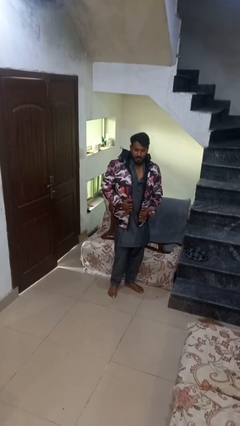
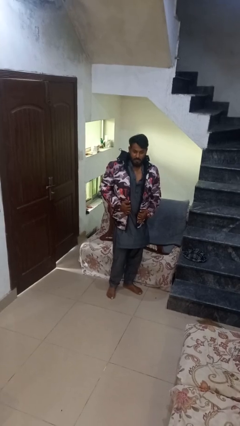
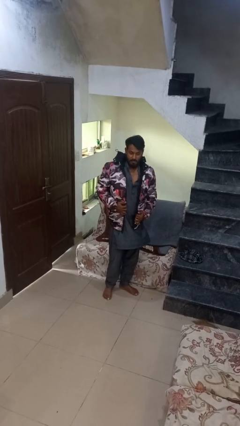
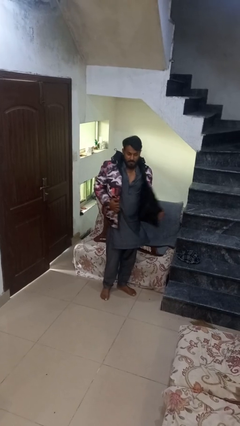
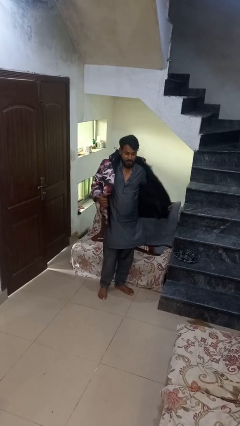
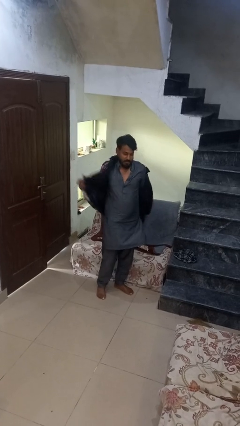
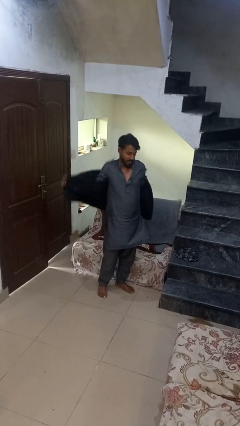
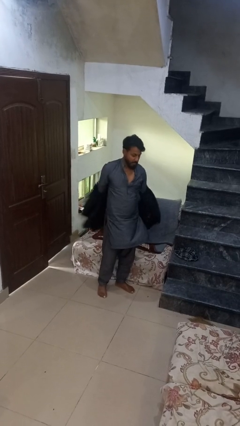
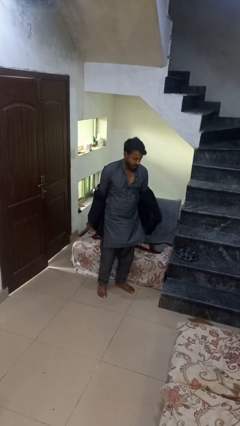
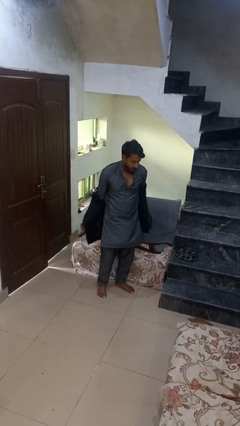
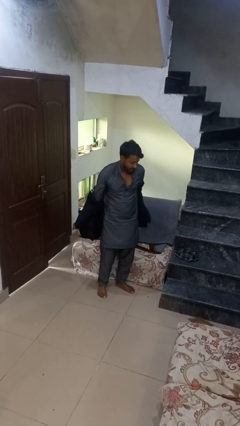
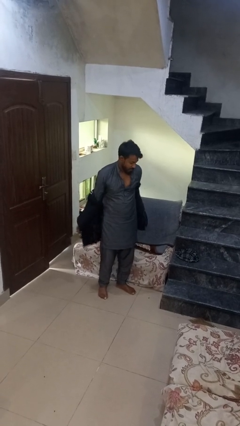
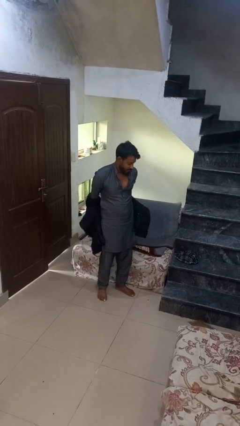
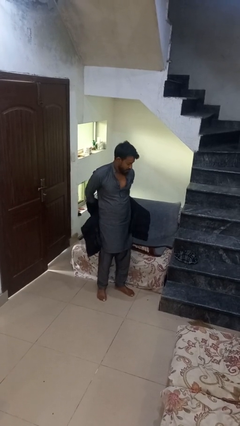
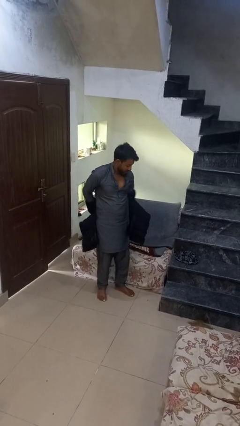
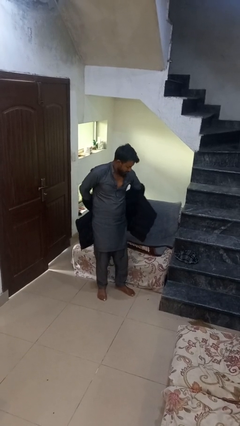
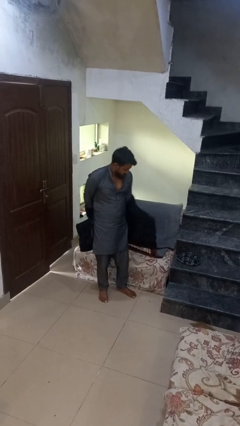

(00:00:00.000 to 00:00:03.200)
person takes off jacket

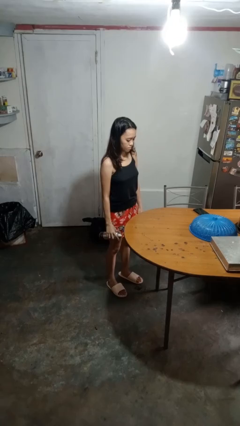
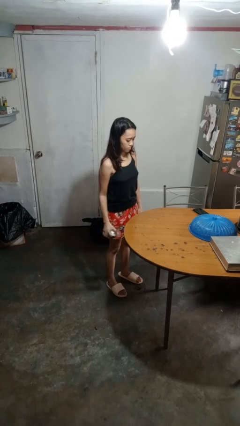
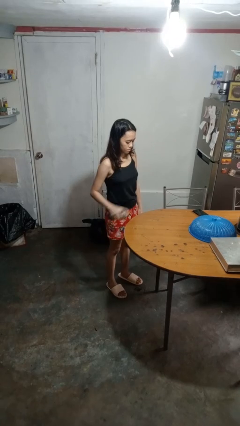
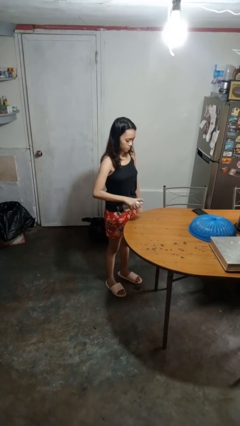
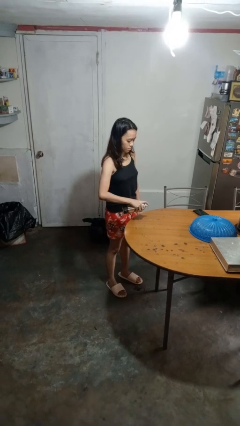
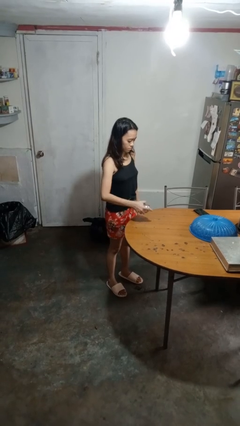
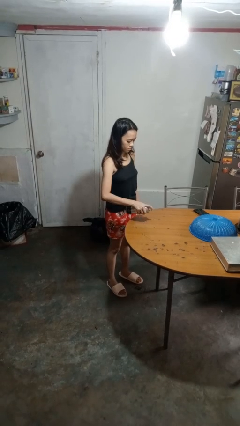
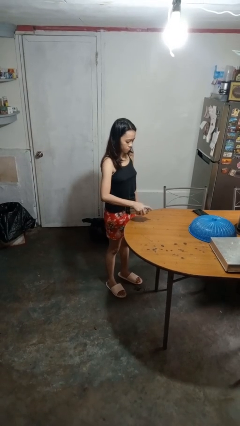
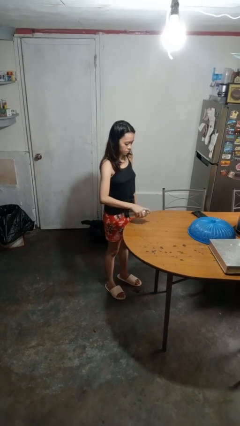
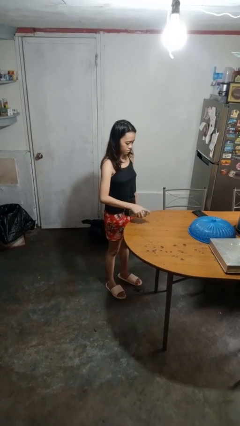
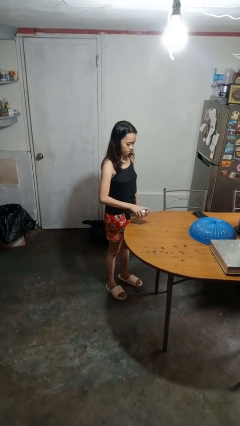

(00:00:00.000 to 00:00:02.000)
person sprays from bottle

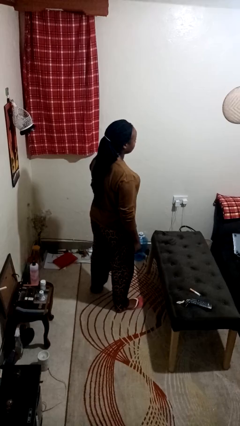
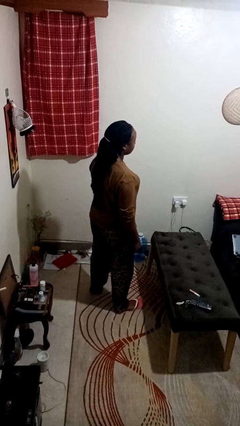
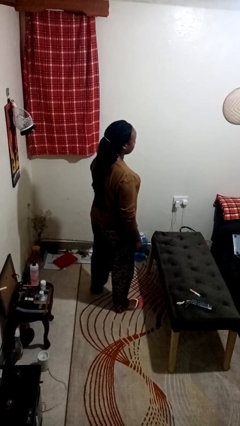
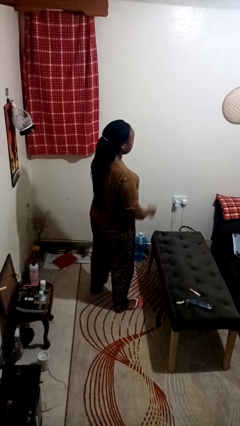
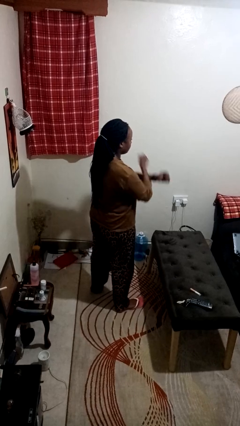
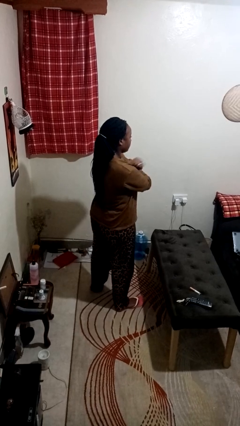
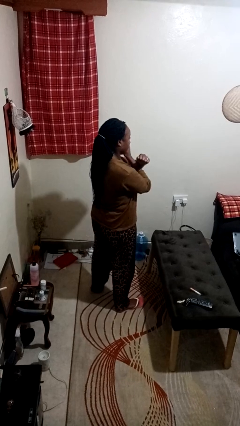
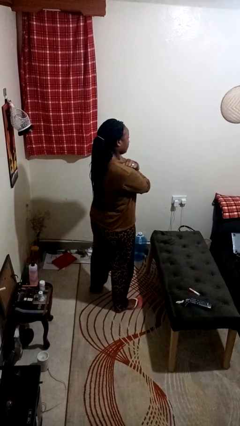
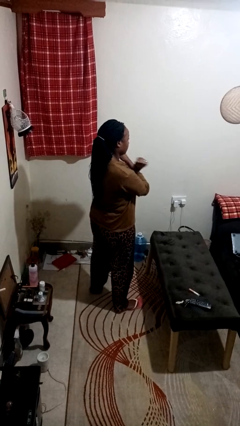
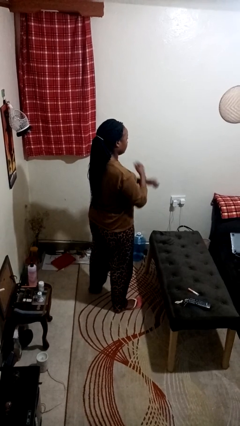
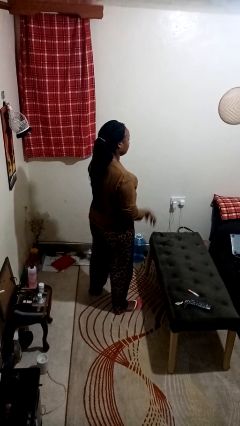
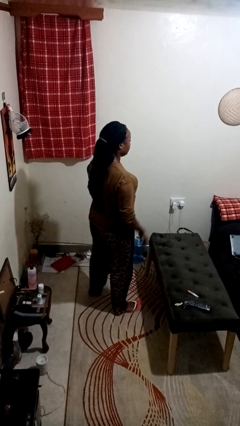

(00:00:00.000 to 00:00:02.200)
person gestures arms x

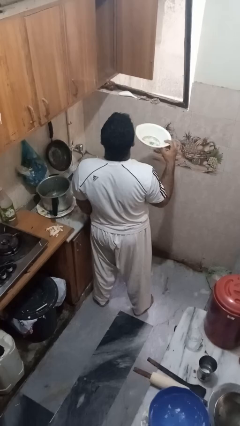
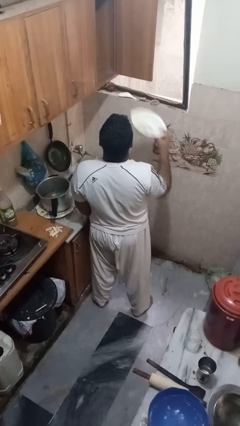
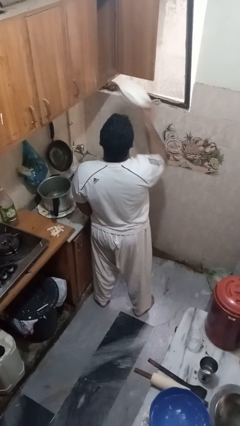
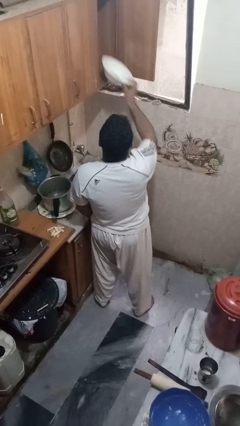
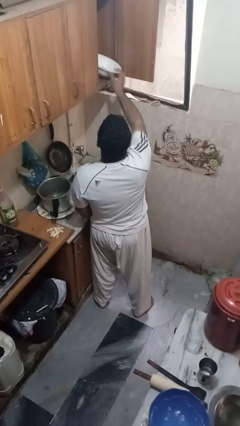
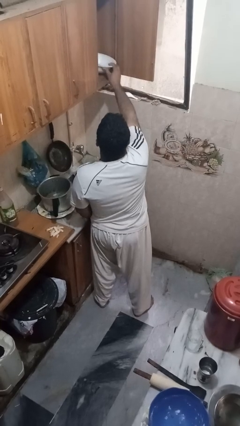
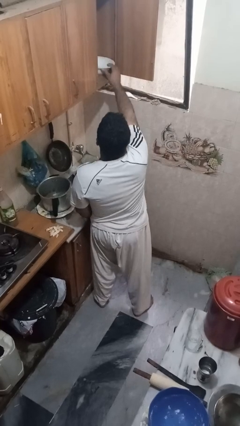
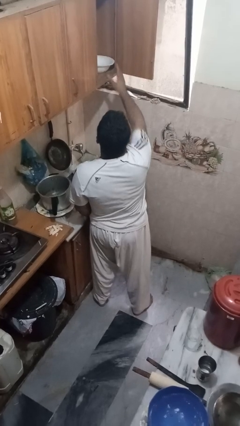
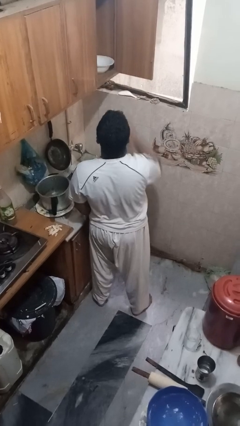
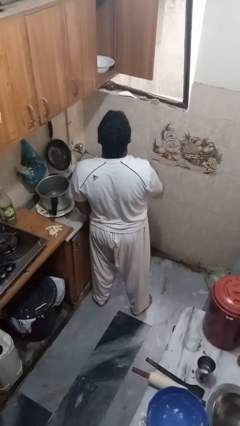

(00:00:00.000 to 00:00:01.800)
person puts object in cabinet

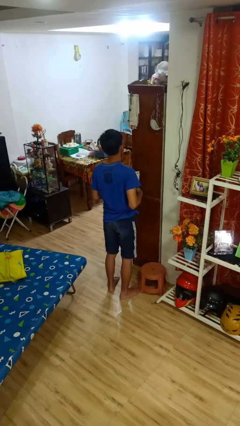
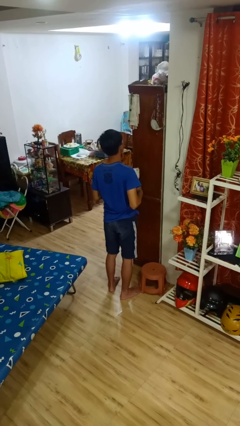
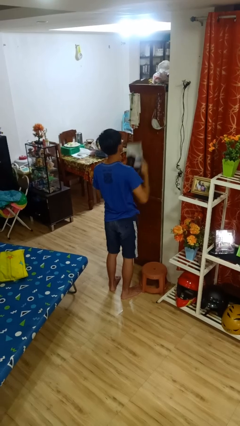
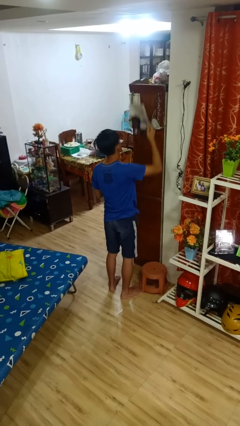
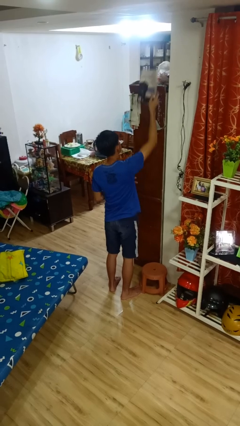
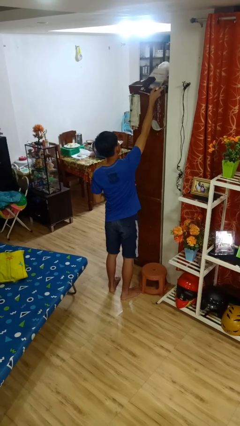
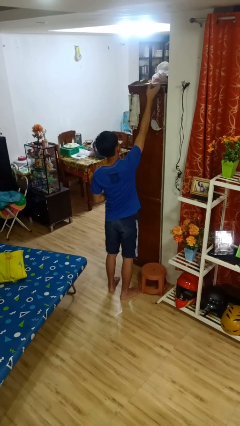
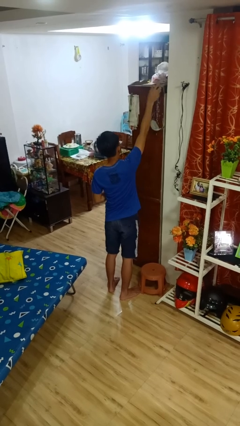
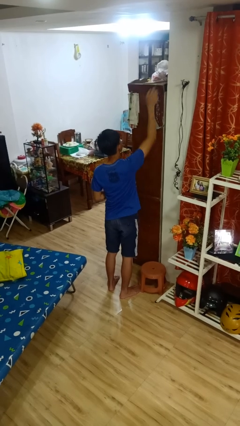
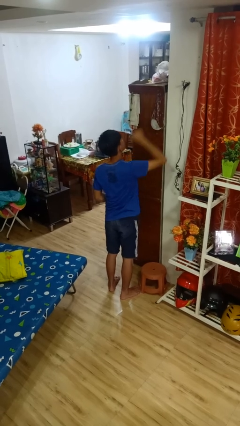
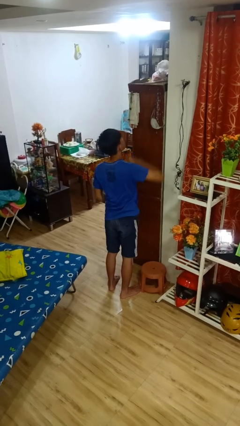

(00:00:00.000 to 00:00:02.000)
person puts down object on shelf

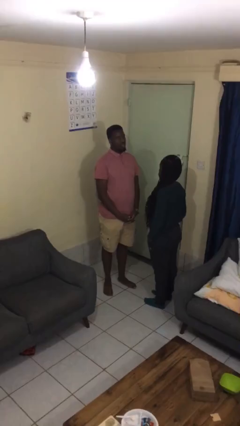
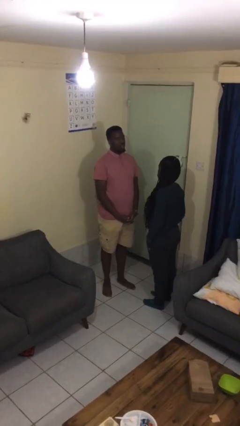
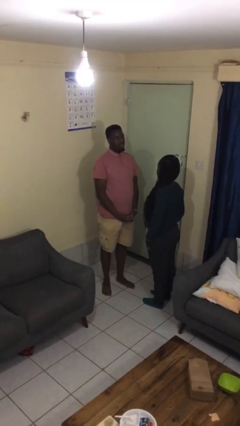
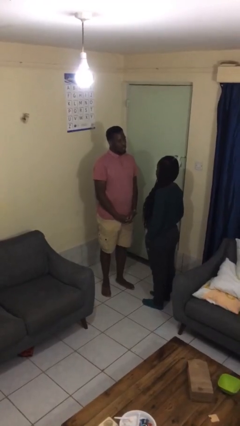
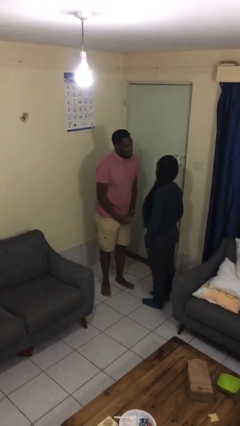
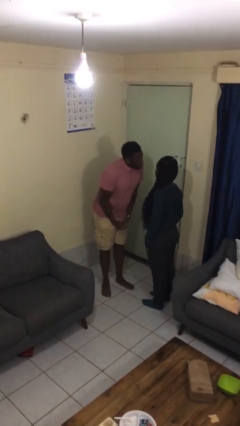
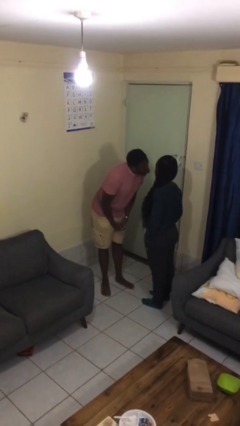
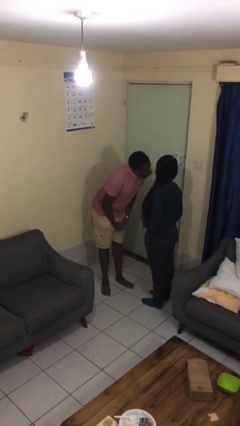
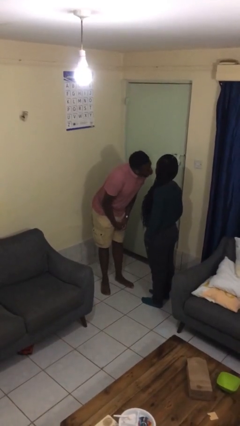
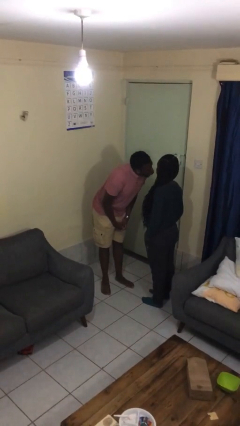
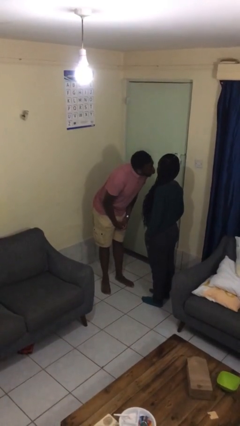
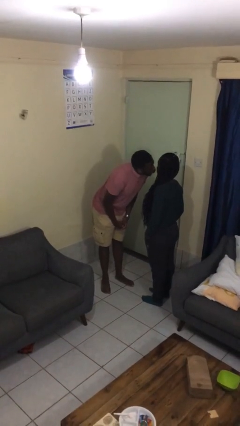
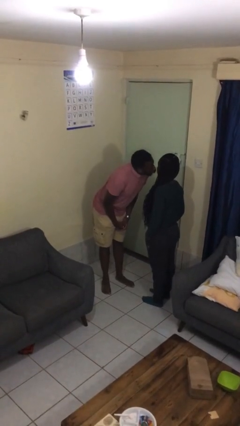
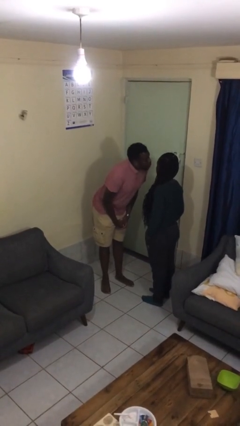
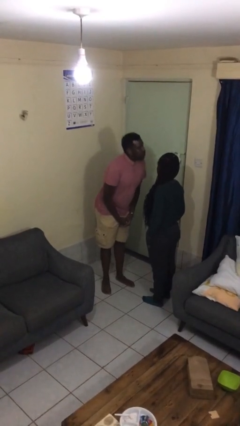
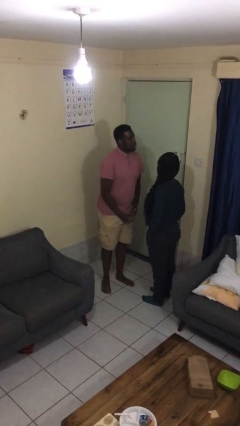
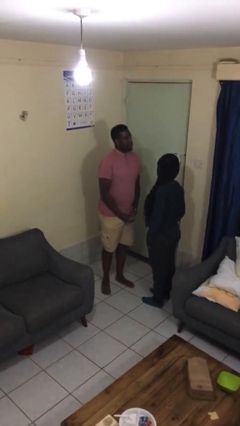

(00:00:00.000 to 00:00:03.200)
person kisses cheek of person

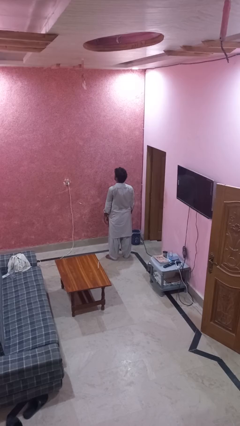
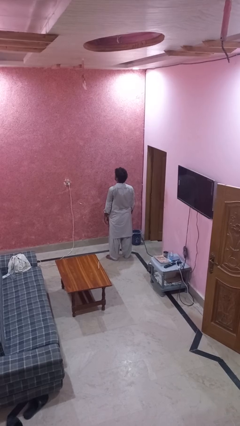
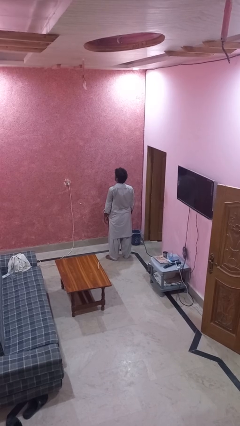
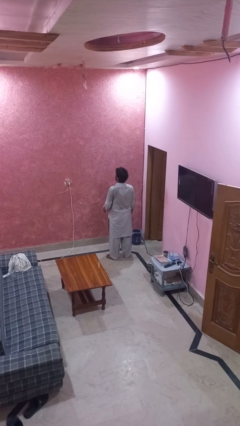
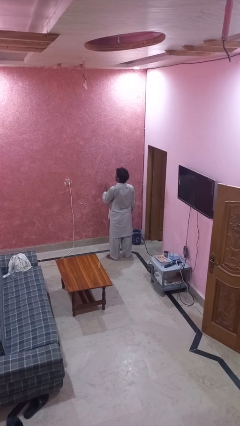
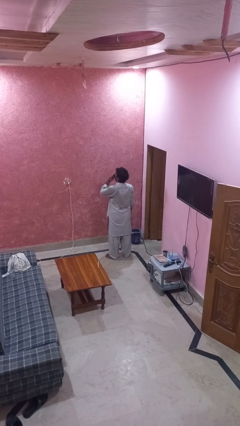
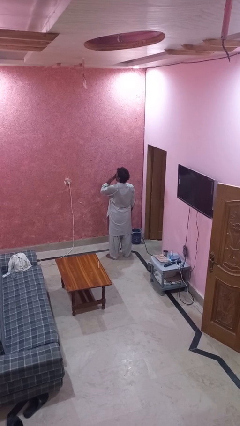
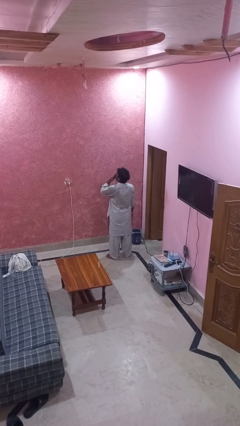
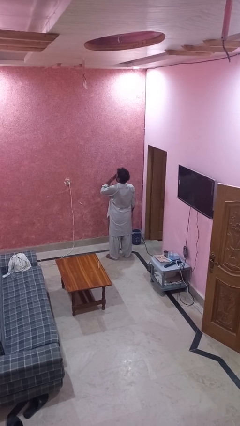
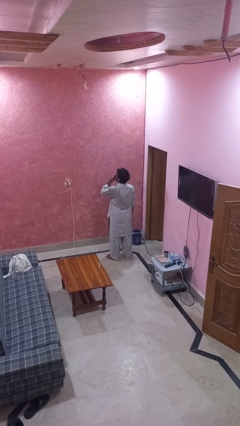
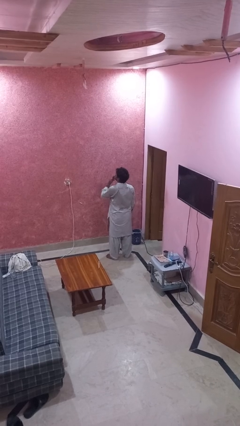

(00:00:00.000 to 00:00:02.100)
person yawns

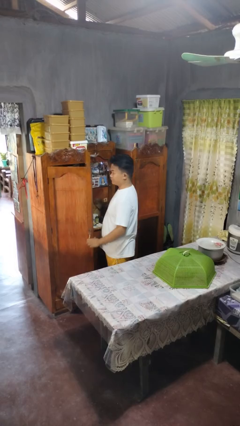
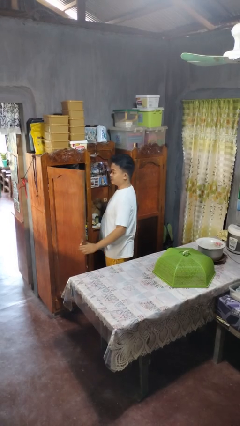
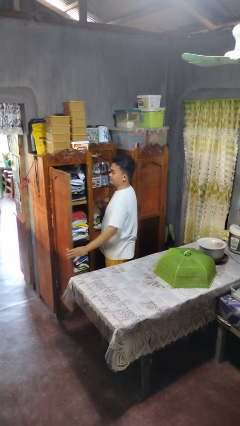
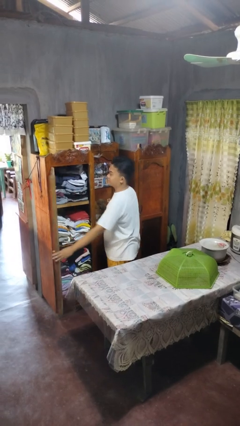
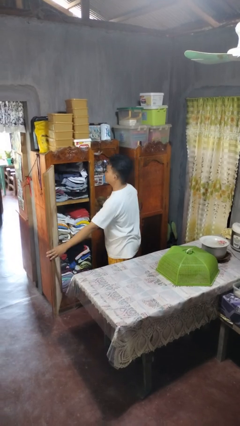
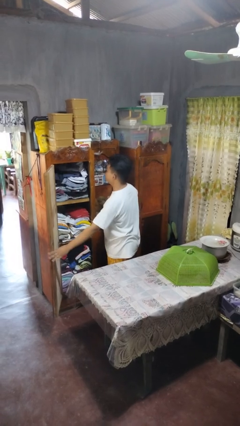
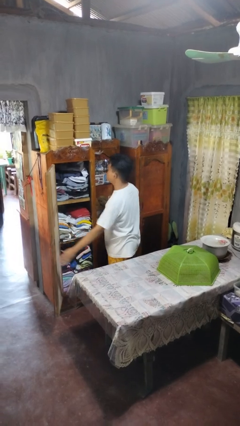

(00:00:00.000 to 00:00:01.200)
person opens closet door
